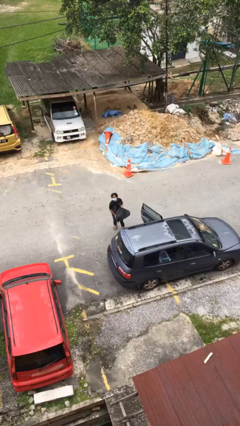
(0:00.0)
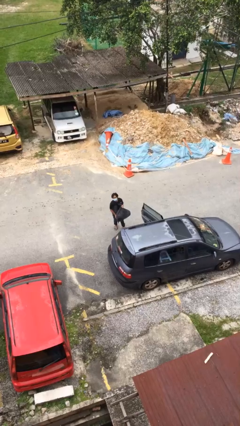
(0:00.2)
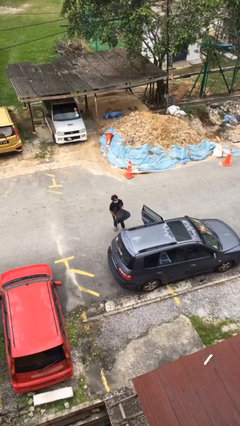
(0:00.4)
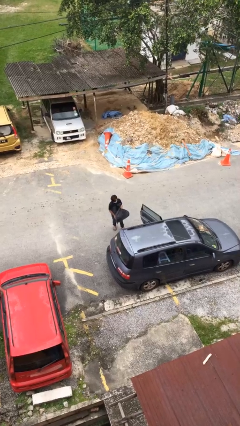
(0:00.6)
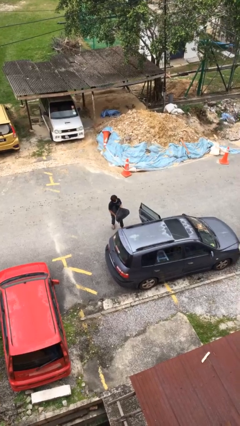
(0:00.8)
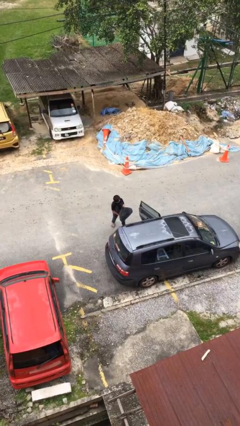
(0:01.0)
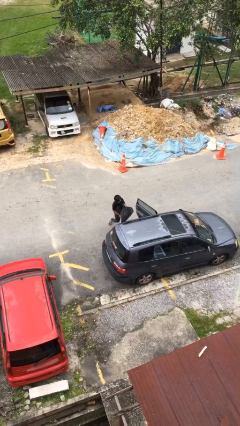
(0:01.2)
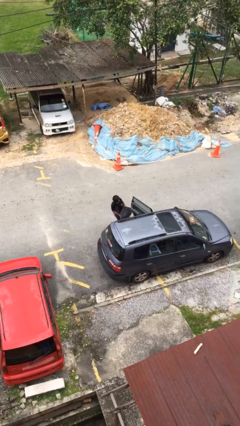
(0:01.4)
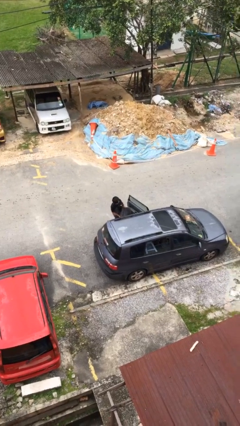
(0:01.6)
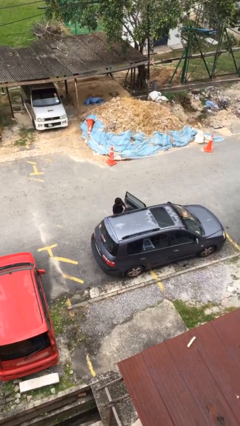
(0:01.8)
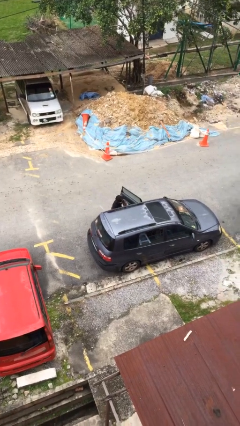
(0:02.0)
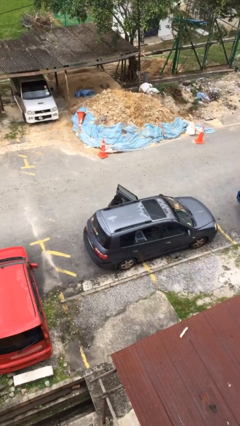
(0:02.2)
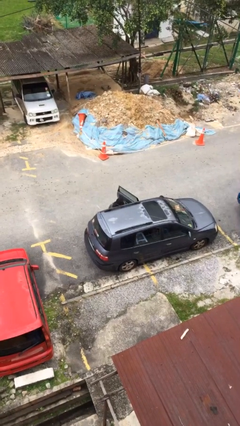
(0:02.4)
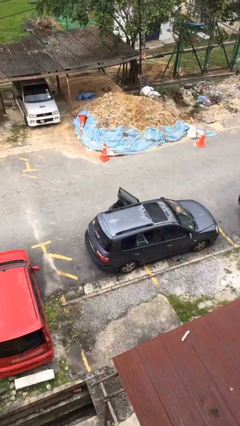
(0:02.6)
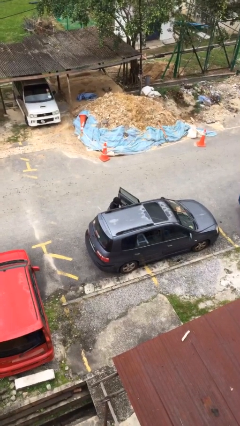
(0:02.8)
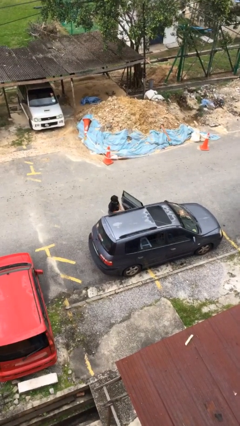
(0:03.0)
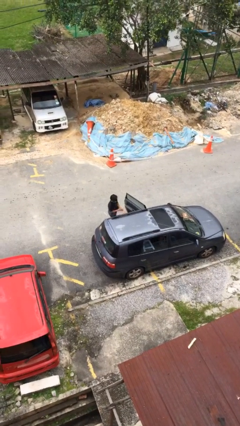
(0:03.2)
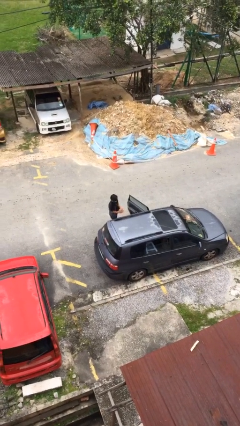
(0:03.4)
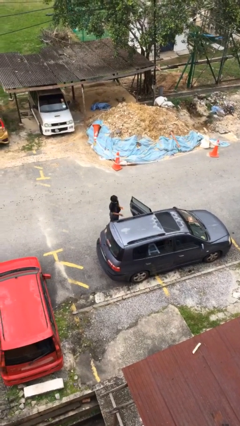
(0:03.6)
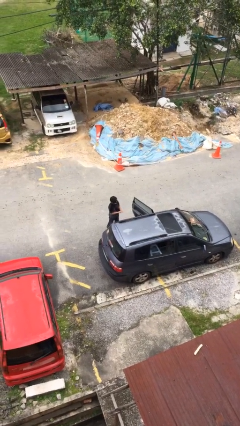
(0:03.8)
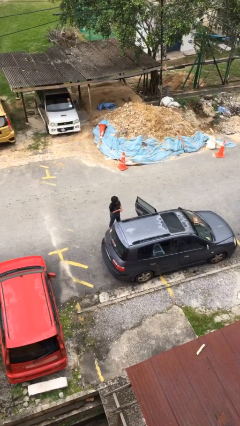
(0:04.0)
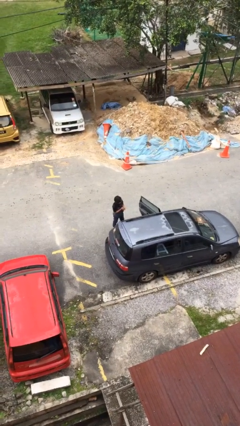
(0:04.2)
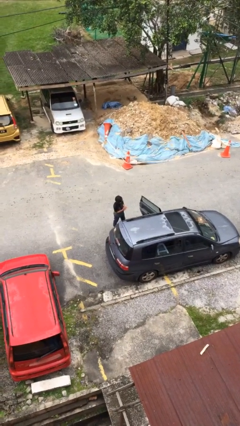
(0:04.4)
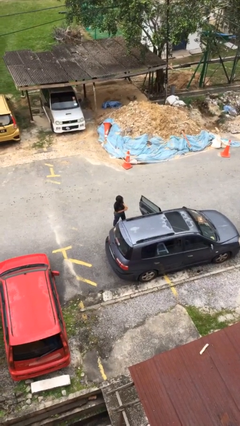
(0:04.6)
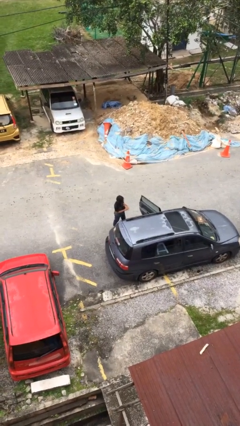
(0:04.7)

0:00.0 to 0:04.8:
person loads car

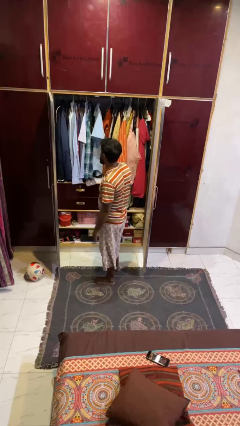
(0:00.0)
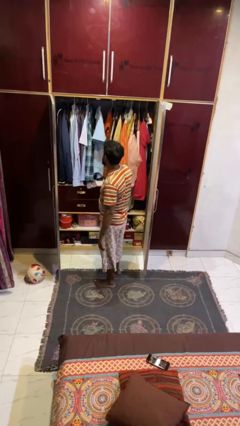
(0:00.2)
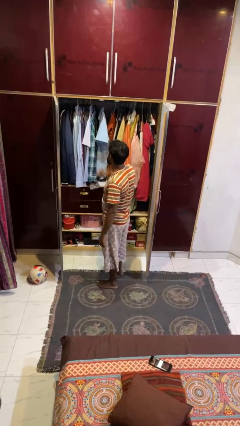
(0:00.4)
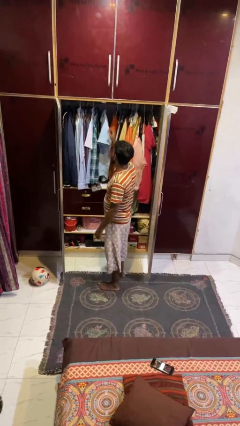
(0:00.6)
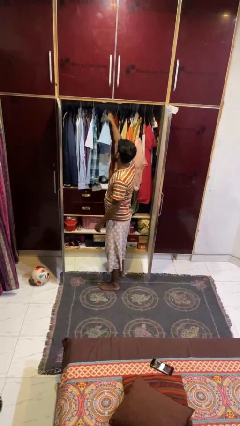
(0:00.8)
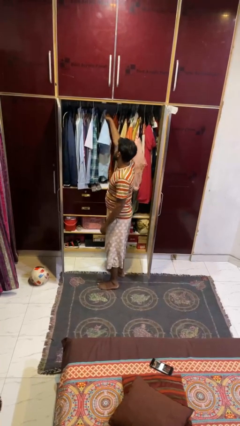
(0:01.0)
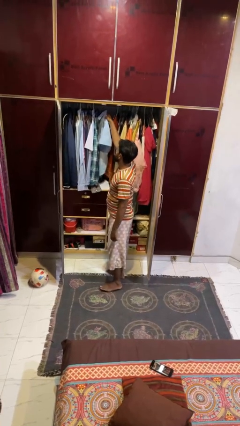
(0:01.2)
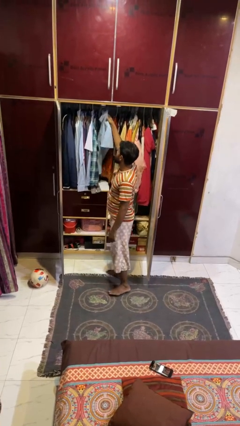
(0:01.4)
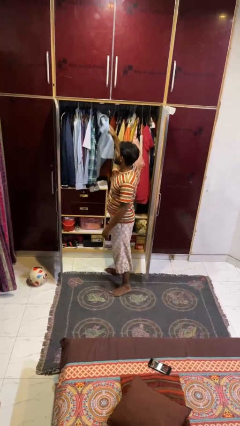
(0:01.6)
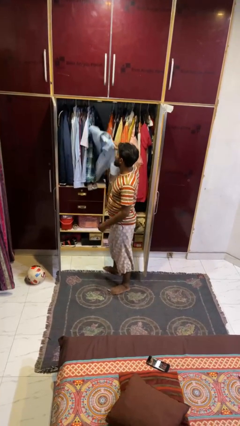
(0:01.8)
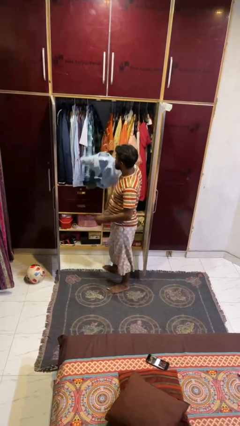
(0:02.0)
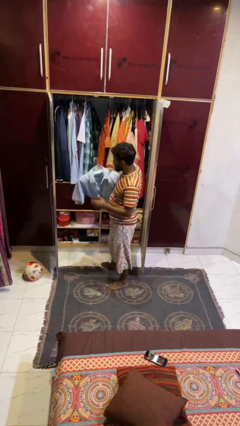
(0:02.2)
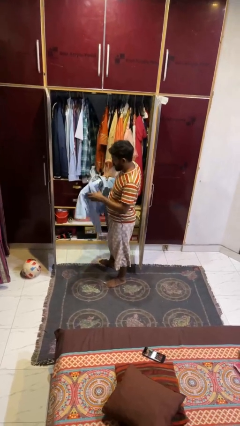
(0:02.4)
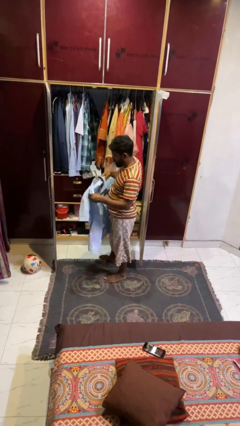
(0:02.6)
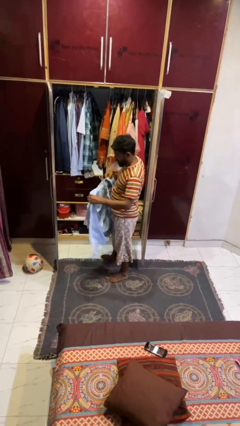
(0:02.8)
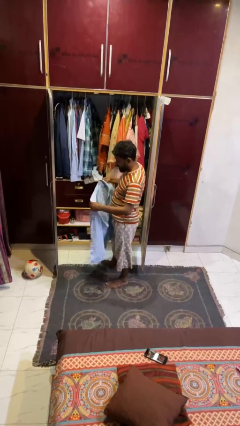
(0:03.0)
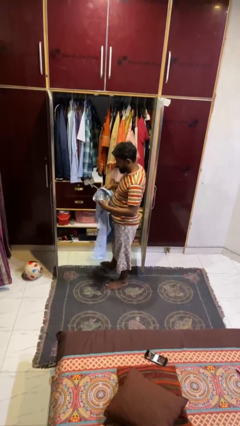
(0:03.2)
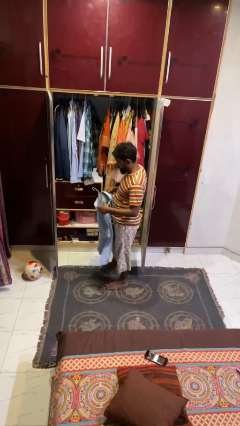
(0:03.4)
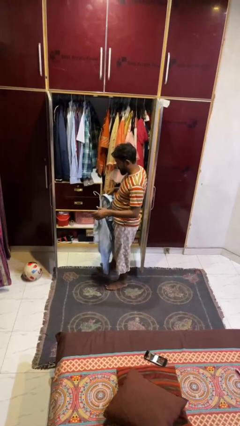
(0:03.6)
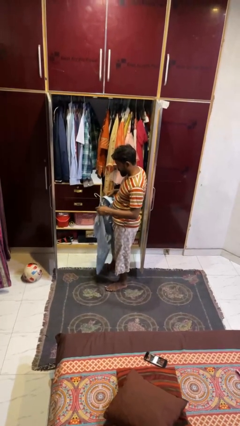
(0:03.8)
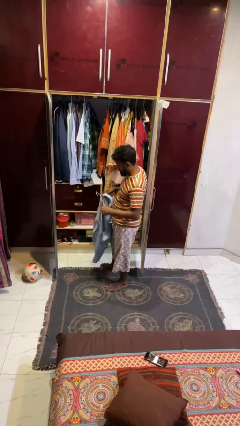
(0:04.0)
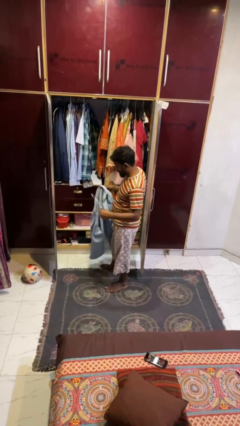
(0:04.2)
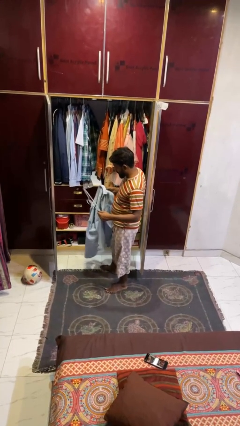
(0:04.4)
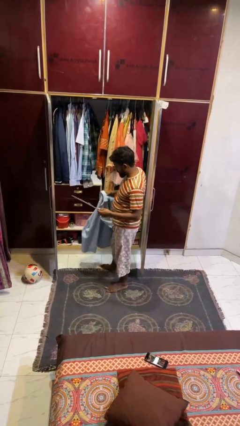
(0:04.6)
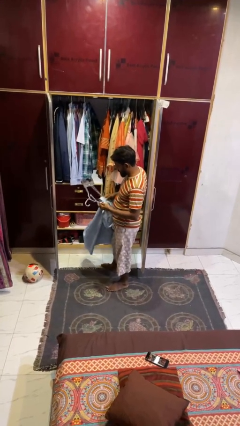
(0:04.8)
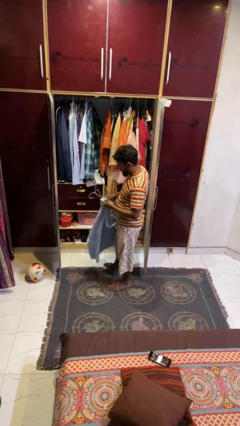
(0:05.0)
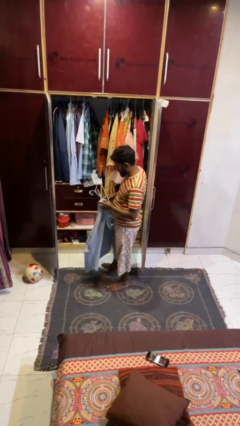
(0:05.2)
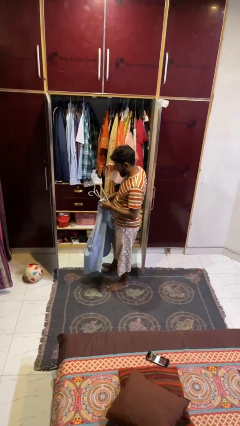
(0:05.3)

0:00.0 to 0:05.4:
person takes clothes from closet

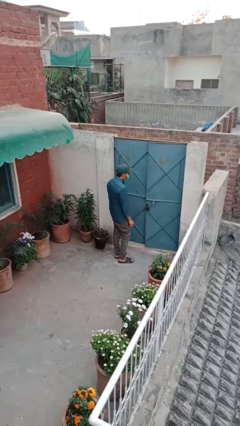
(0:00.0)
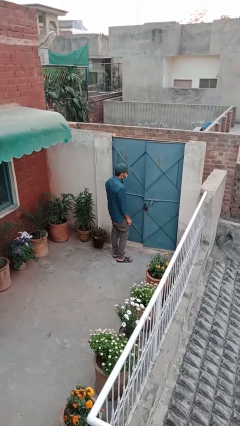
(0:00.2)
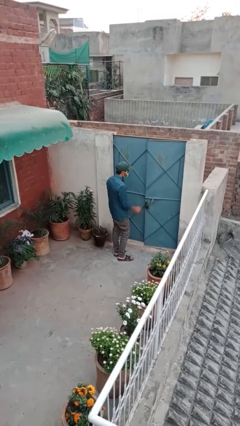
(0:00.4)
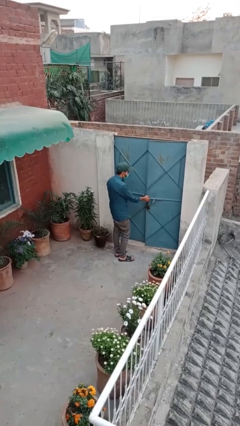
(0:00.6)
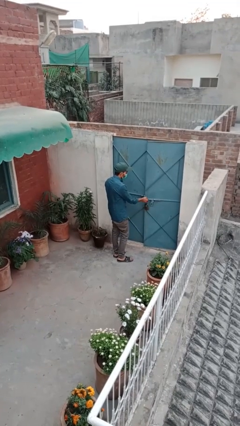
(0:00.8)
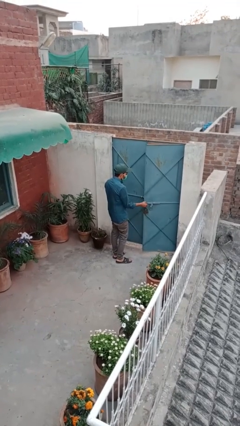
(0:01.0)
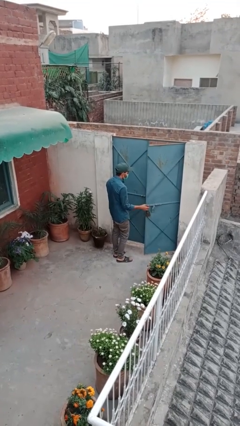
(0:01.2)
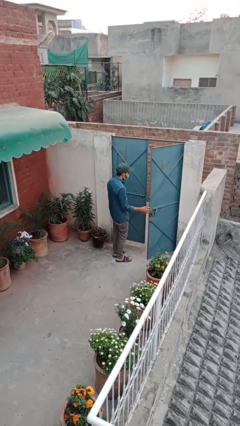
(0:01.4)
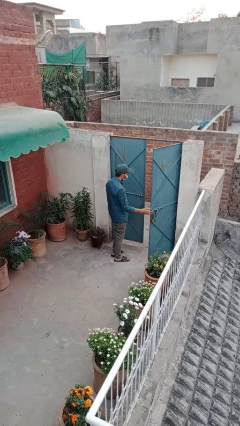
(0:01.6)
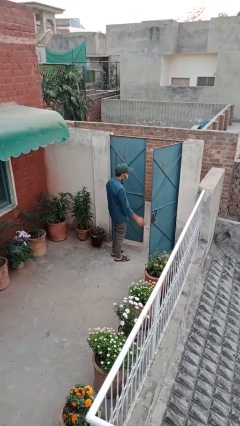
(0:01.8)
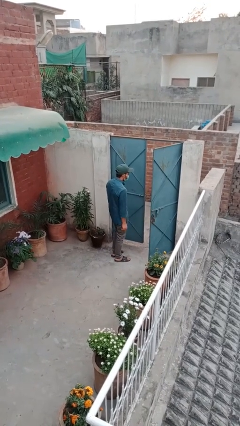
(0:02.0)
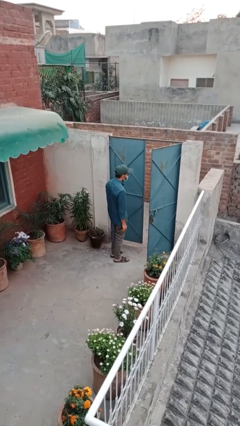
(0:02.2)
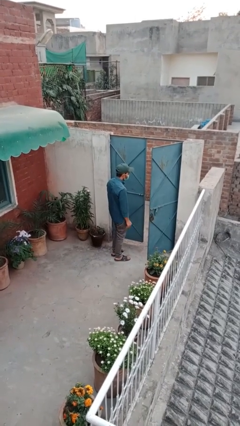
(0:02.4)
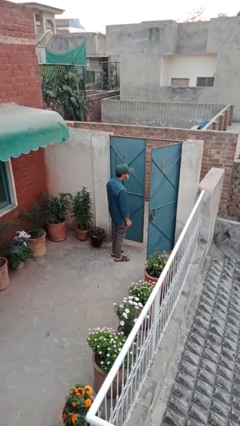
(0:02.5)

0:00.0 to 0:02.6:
person opens facility door

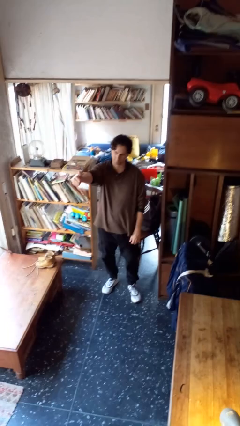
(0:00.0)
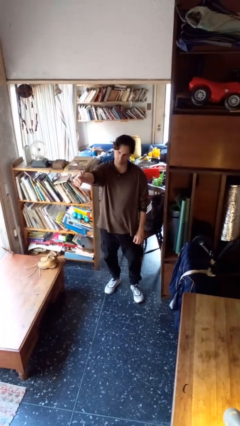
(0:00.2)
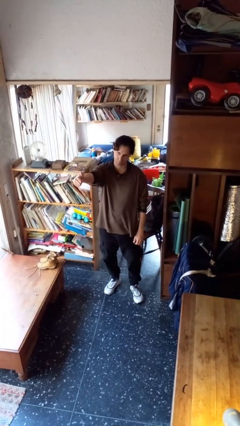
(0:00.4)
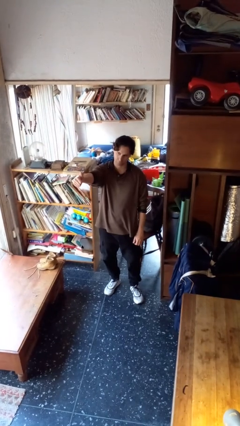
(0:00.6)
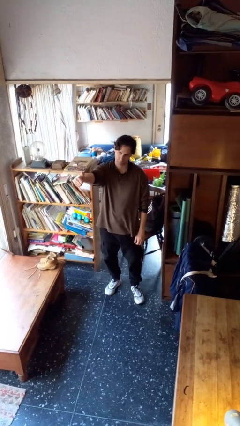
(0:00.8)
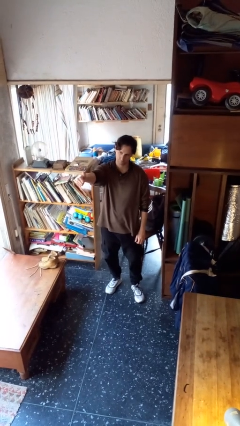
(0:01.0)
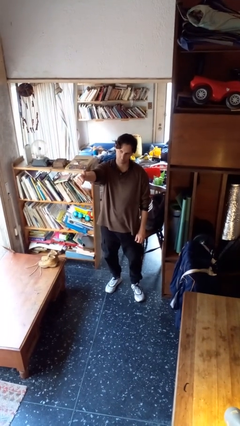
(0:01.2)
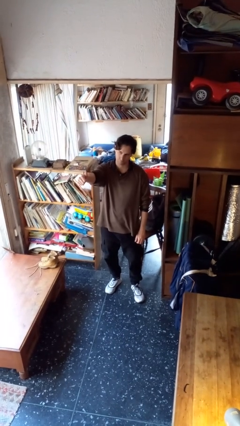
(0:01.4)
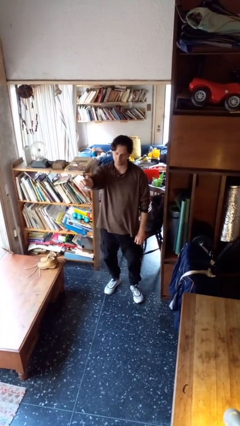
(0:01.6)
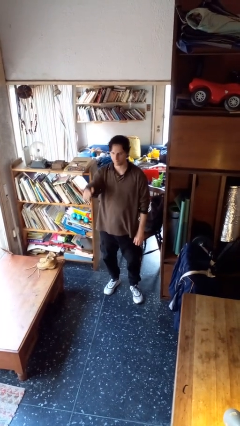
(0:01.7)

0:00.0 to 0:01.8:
person gestures thumbs up

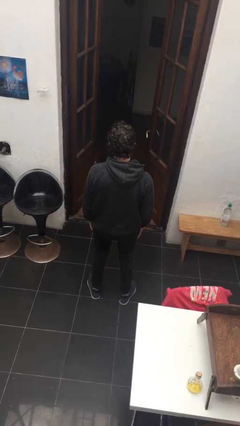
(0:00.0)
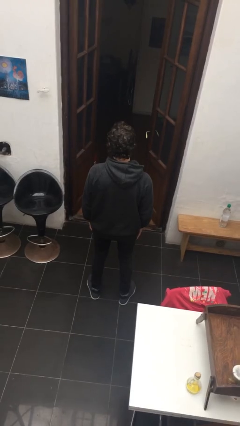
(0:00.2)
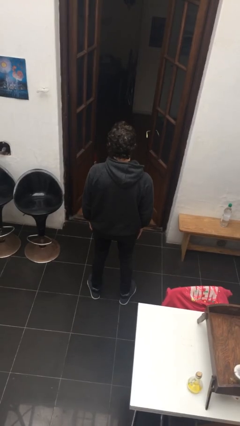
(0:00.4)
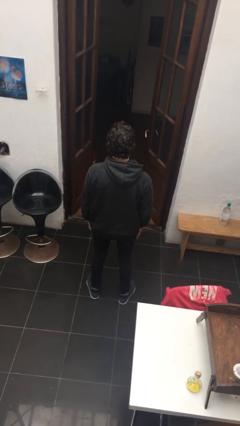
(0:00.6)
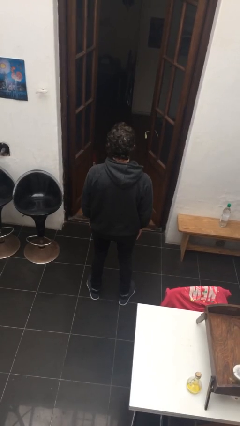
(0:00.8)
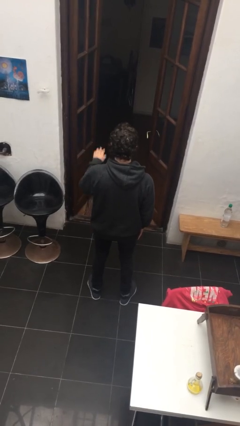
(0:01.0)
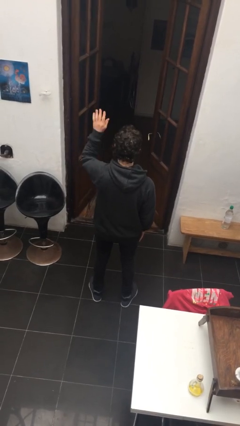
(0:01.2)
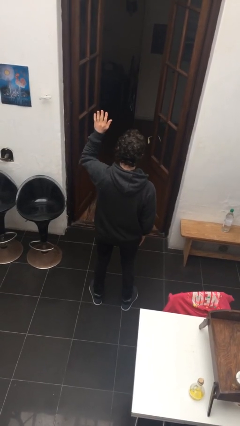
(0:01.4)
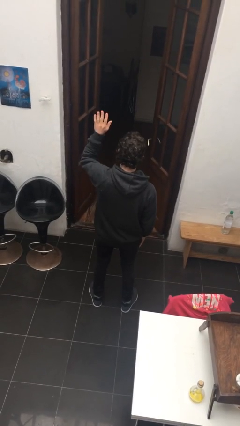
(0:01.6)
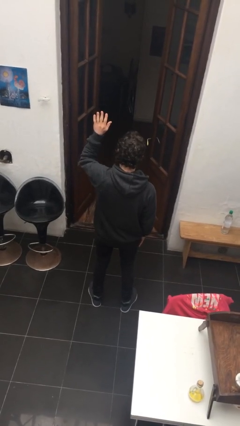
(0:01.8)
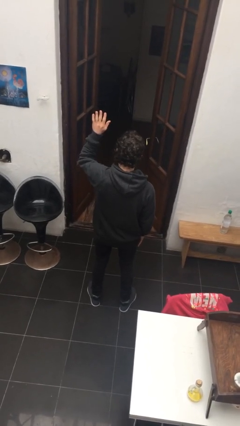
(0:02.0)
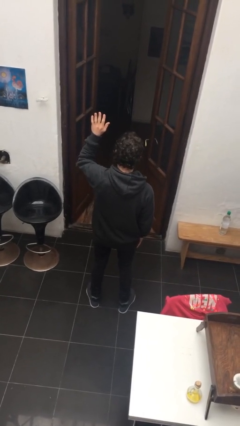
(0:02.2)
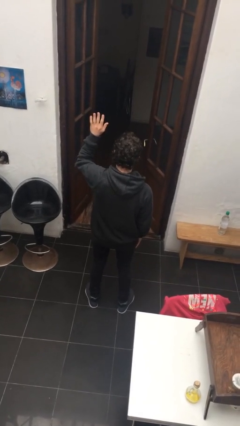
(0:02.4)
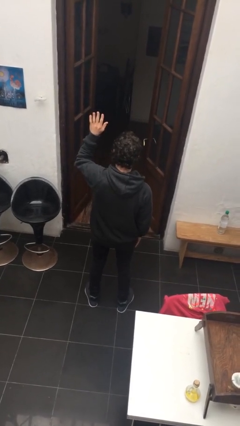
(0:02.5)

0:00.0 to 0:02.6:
person gestures raise hand

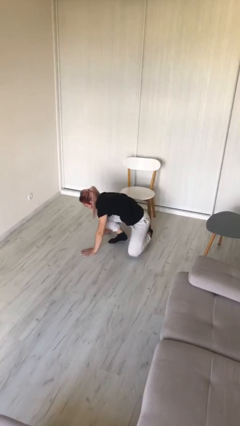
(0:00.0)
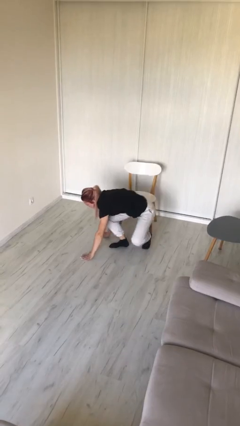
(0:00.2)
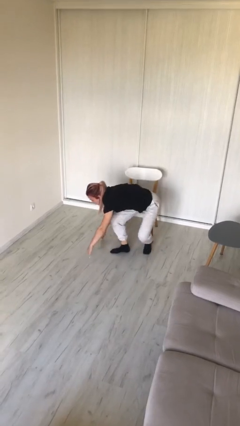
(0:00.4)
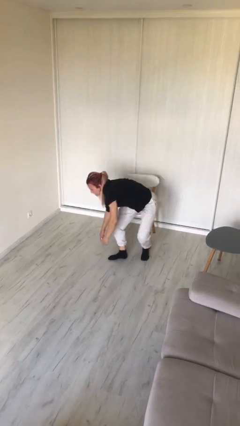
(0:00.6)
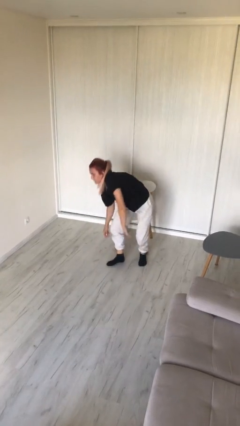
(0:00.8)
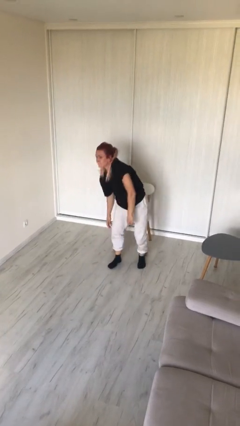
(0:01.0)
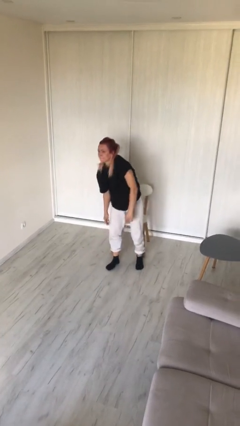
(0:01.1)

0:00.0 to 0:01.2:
person stands up from floor
